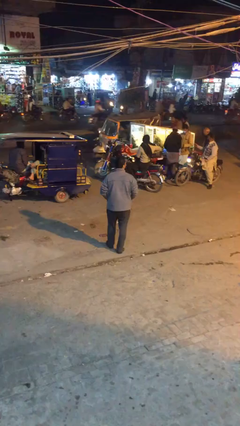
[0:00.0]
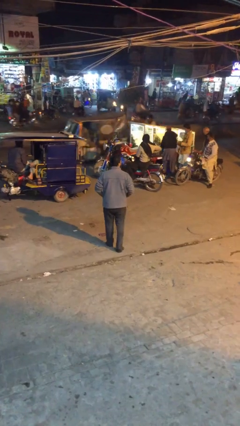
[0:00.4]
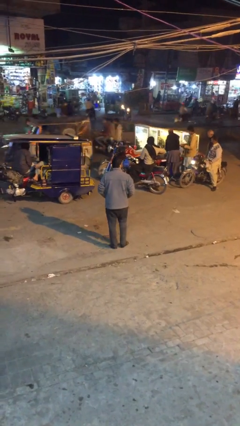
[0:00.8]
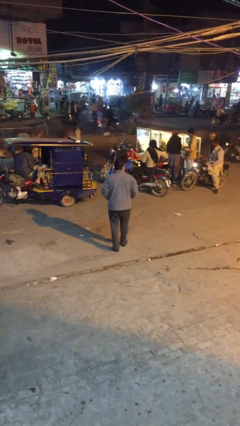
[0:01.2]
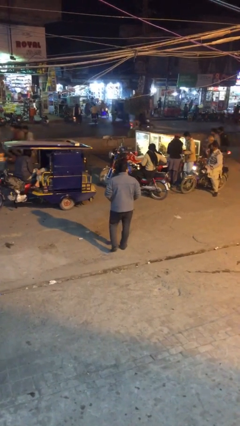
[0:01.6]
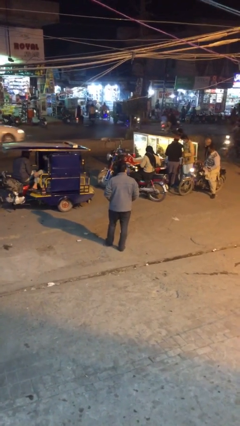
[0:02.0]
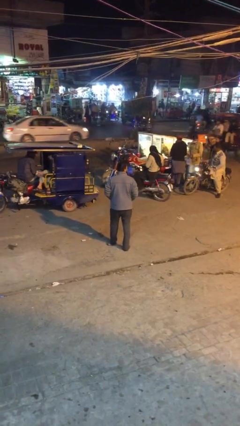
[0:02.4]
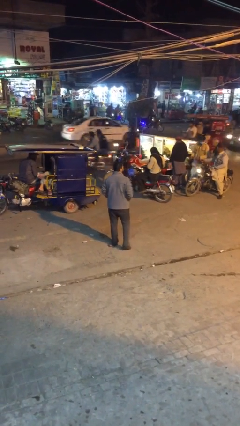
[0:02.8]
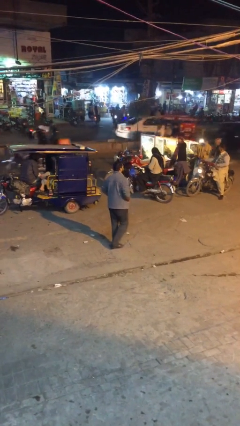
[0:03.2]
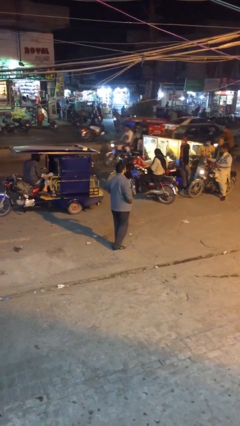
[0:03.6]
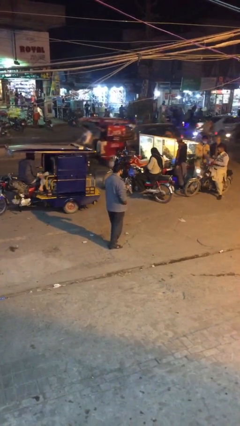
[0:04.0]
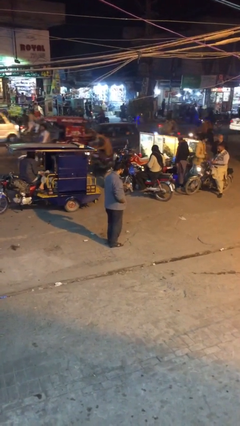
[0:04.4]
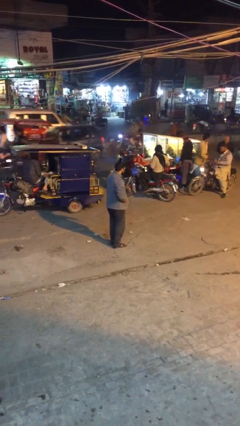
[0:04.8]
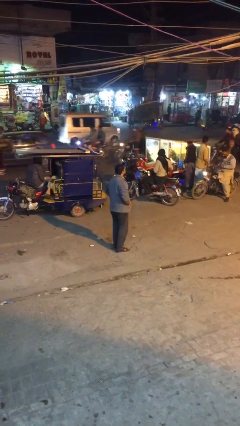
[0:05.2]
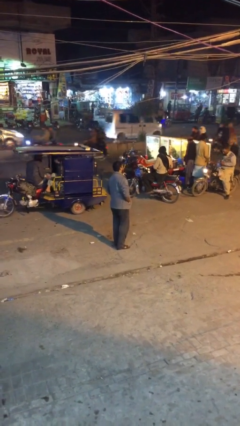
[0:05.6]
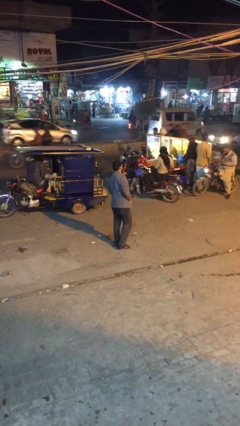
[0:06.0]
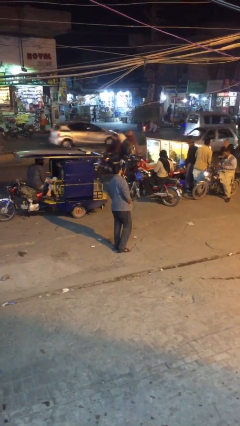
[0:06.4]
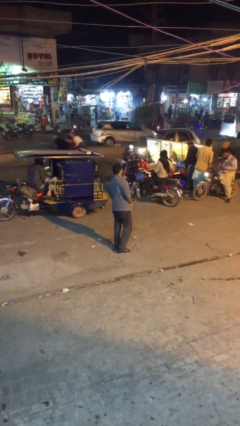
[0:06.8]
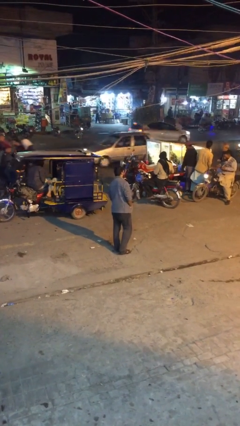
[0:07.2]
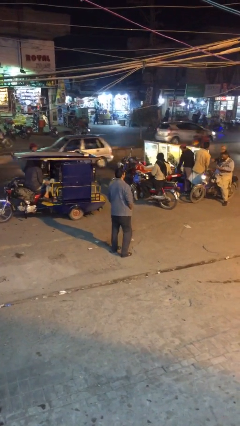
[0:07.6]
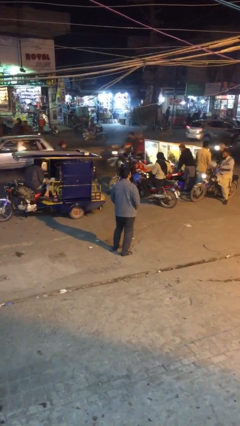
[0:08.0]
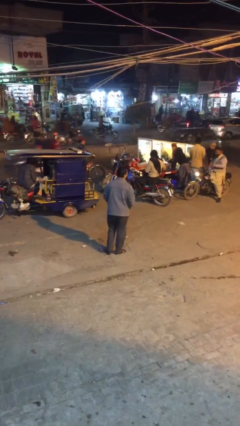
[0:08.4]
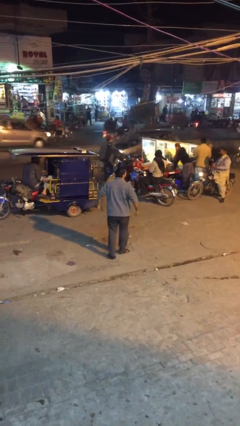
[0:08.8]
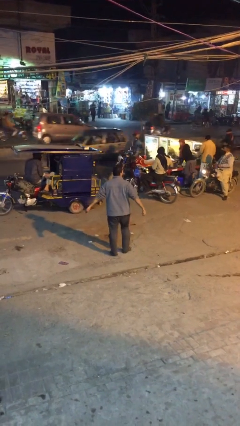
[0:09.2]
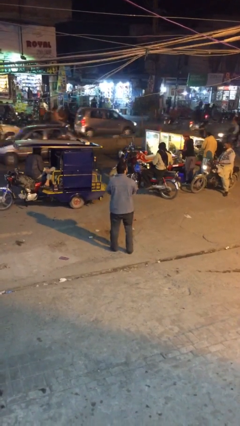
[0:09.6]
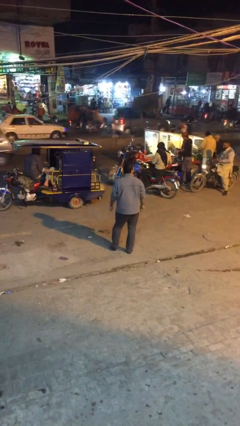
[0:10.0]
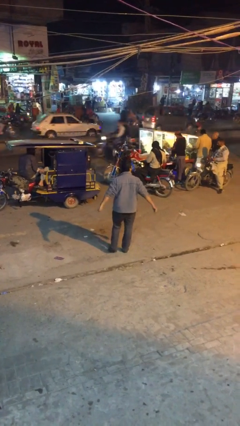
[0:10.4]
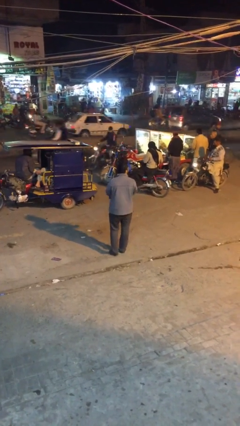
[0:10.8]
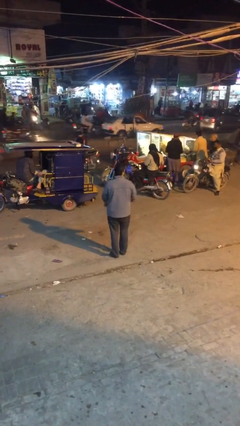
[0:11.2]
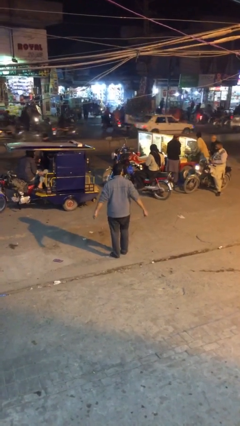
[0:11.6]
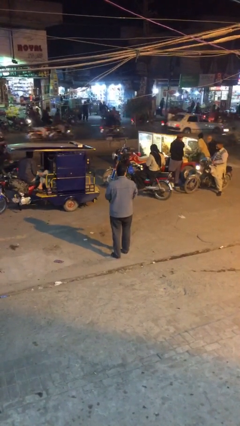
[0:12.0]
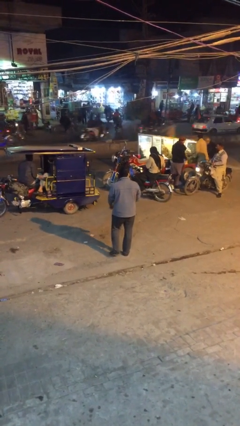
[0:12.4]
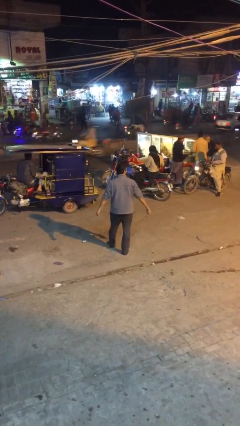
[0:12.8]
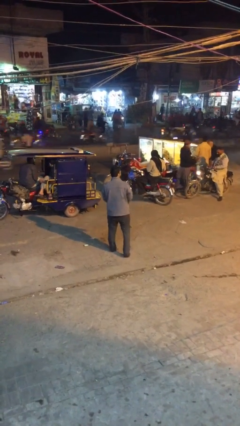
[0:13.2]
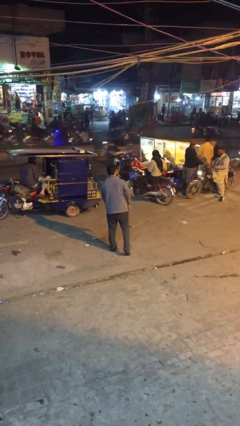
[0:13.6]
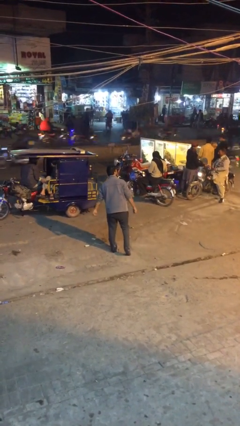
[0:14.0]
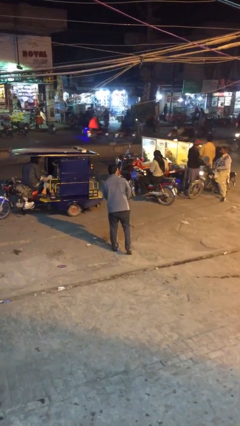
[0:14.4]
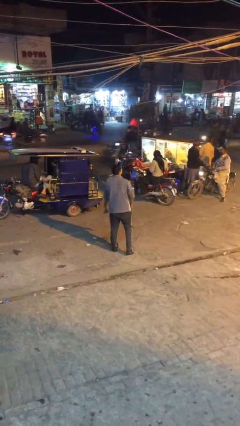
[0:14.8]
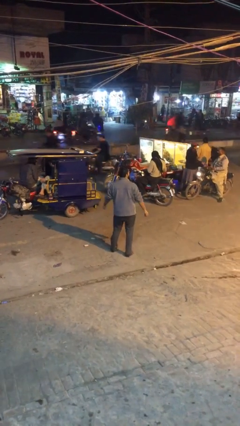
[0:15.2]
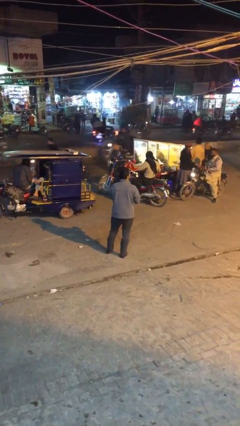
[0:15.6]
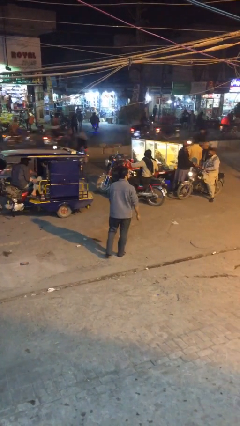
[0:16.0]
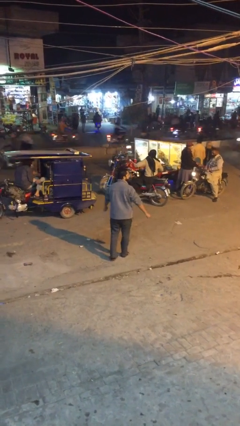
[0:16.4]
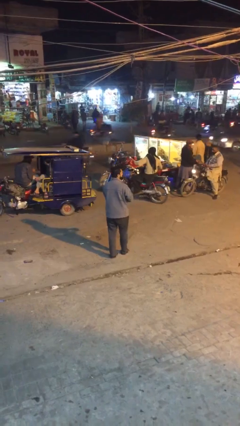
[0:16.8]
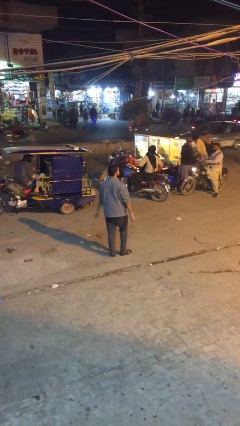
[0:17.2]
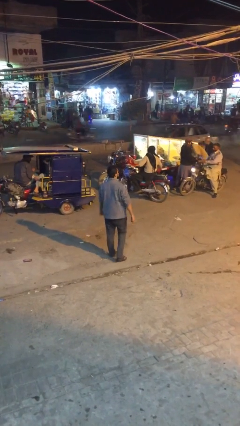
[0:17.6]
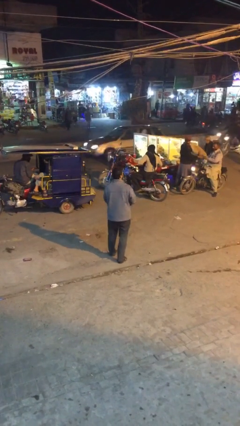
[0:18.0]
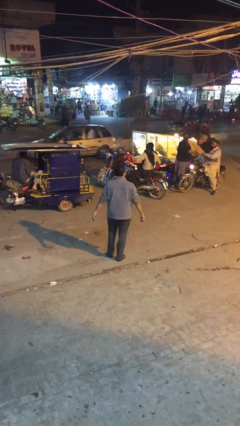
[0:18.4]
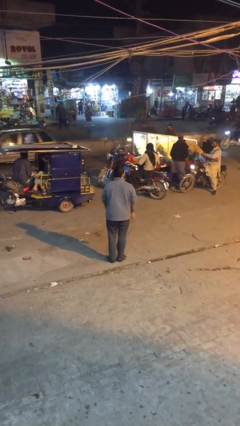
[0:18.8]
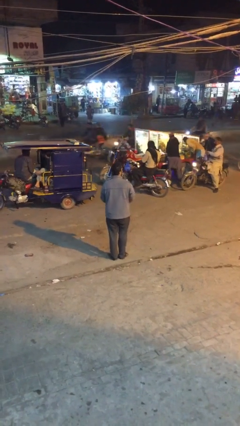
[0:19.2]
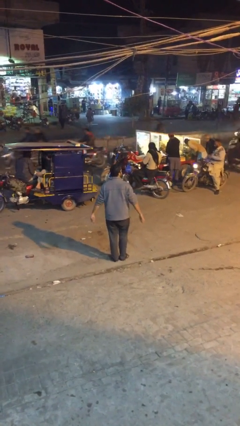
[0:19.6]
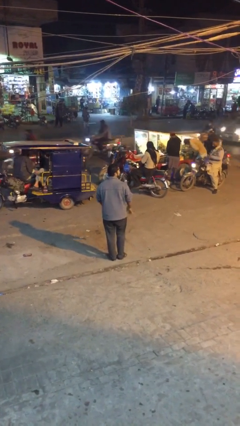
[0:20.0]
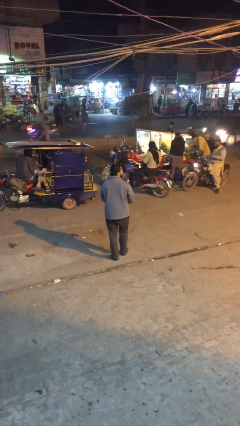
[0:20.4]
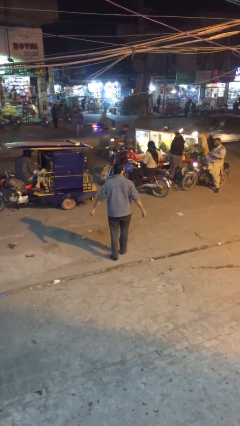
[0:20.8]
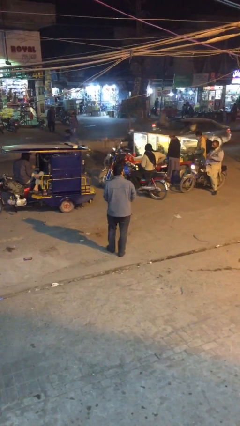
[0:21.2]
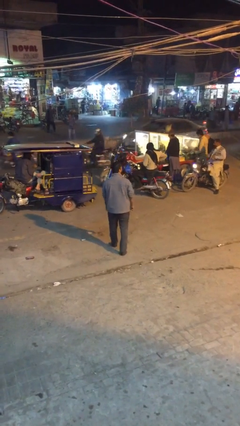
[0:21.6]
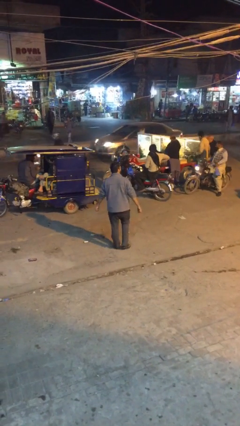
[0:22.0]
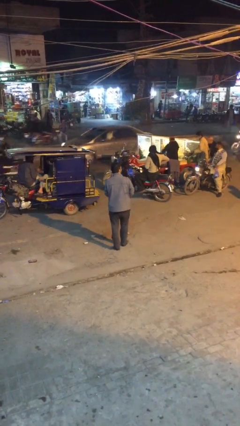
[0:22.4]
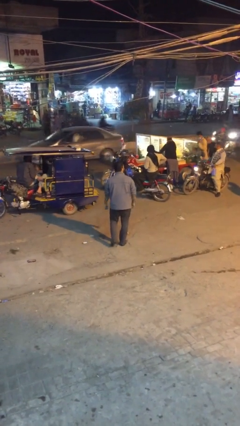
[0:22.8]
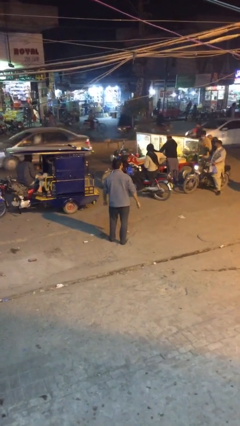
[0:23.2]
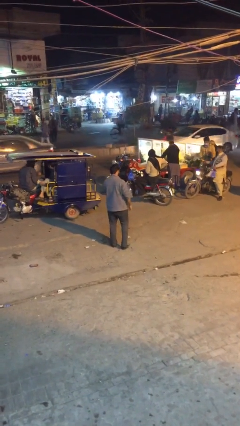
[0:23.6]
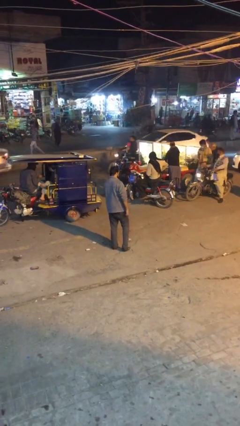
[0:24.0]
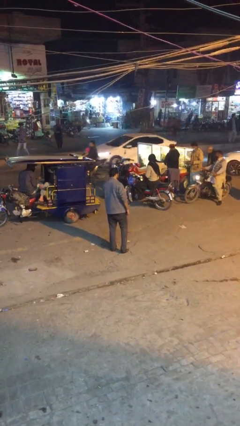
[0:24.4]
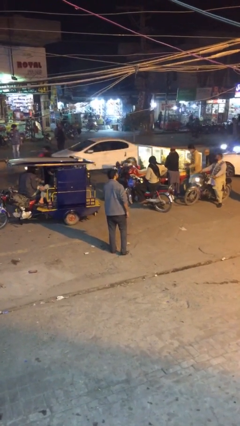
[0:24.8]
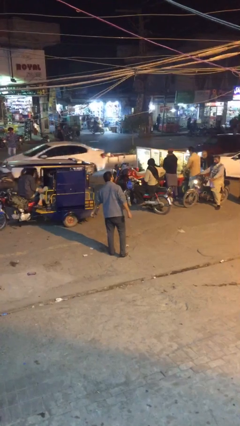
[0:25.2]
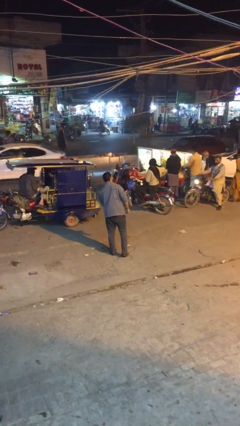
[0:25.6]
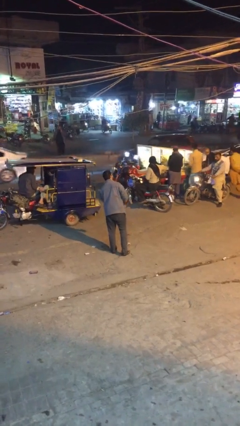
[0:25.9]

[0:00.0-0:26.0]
person walks

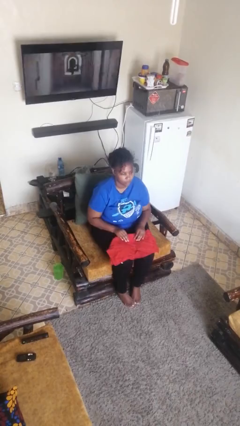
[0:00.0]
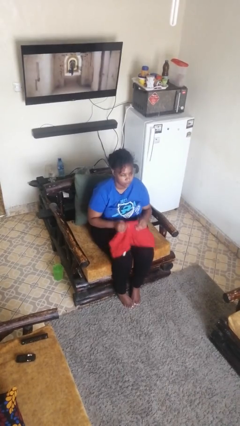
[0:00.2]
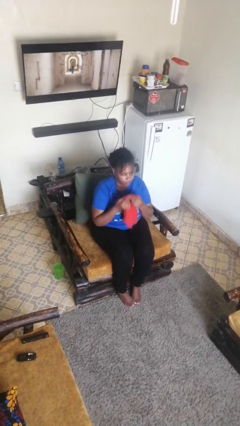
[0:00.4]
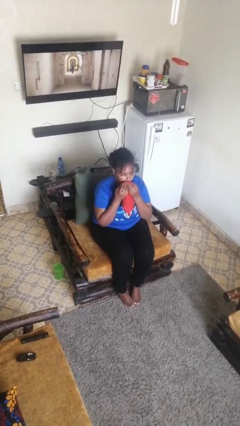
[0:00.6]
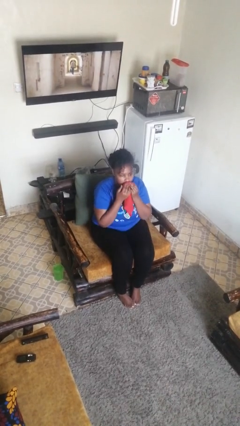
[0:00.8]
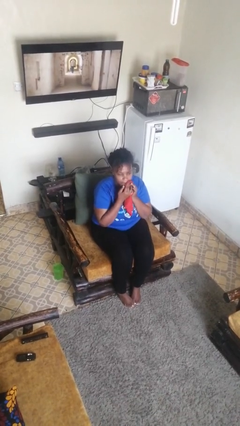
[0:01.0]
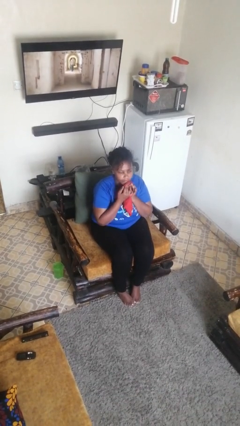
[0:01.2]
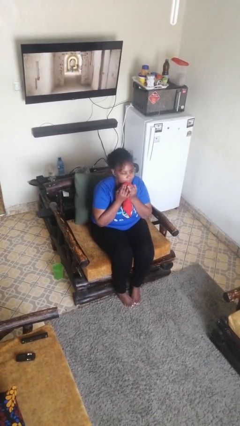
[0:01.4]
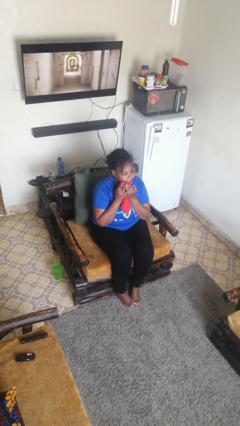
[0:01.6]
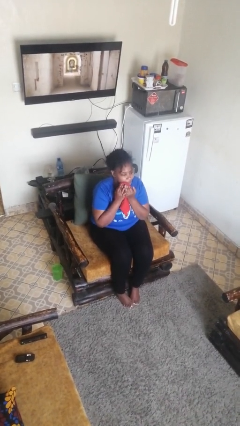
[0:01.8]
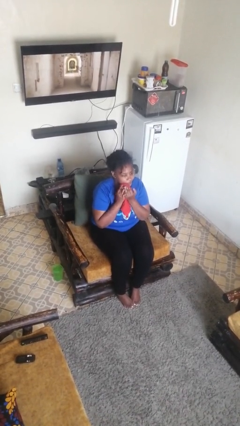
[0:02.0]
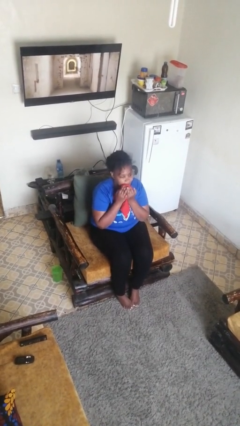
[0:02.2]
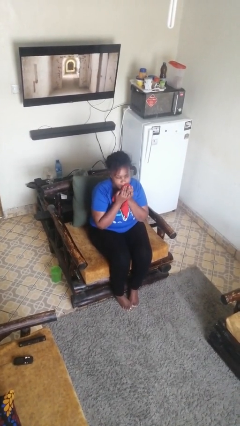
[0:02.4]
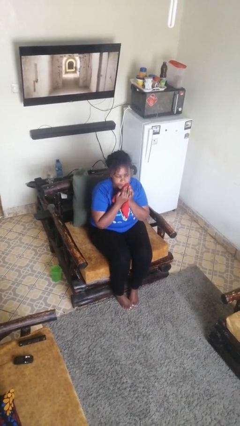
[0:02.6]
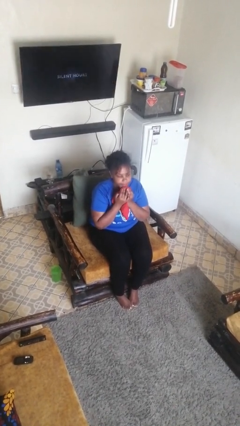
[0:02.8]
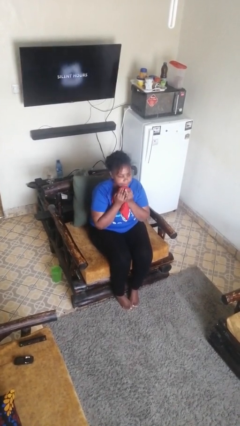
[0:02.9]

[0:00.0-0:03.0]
person wipes mouth with napkin

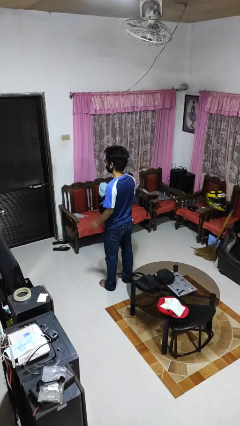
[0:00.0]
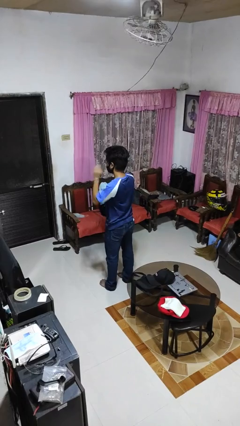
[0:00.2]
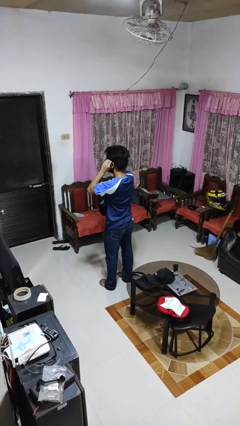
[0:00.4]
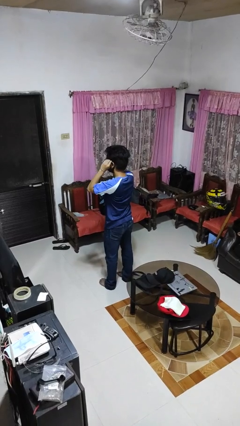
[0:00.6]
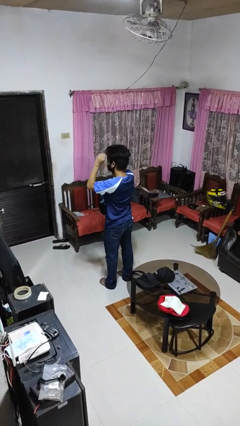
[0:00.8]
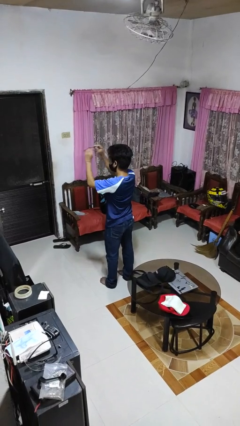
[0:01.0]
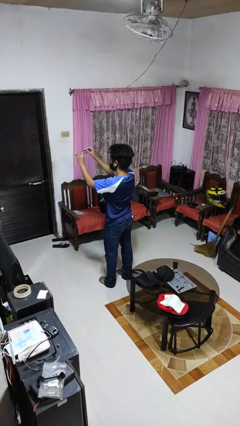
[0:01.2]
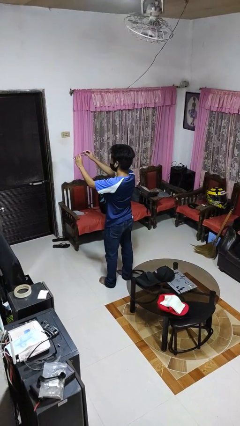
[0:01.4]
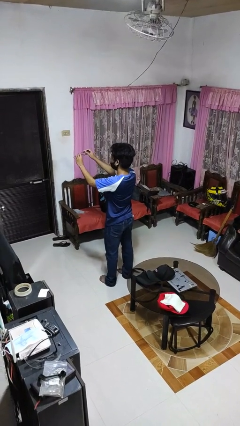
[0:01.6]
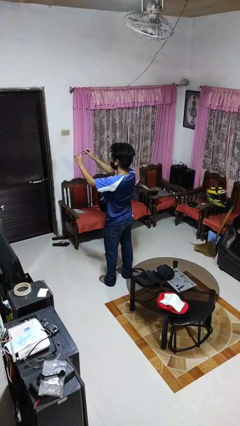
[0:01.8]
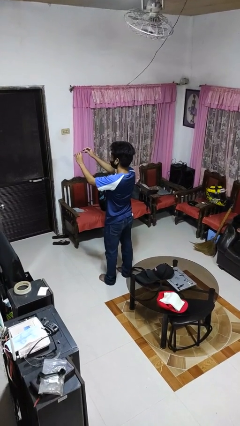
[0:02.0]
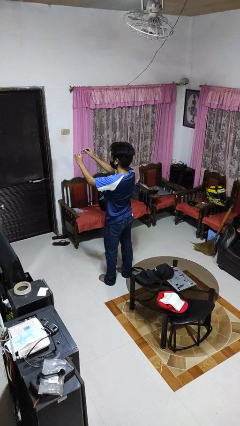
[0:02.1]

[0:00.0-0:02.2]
person takes off glasses
